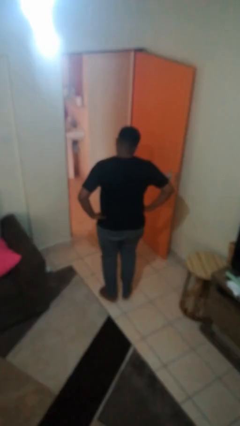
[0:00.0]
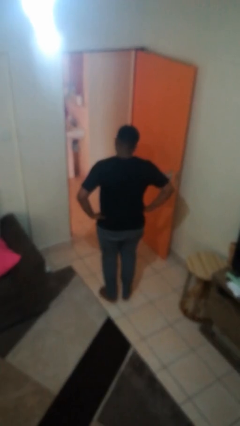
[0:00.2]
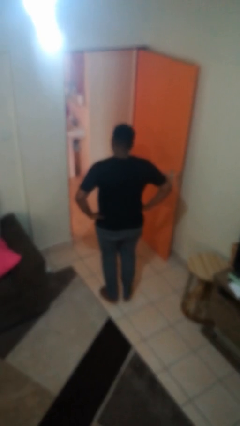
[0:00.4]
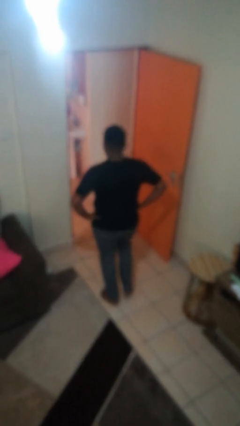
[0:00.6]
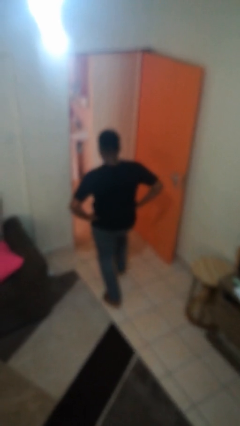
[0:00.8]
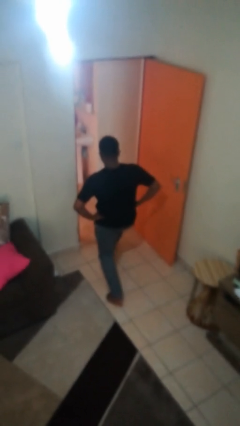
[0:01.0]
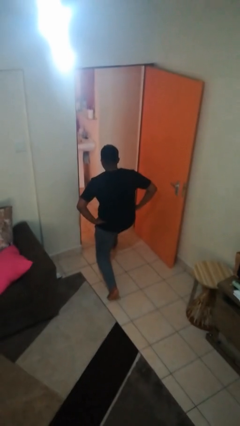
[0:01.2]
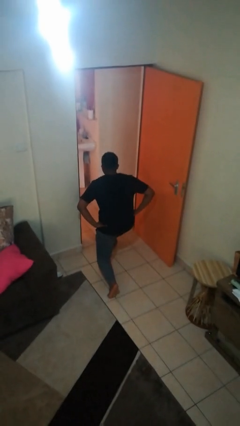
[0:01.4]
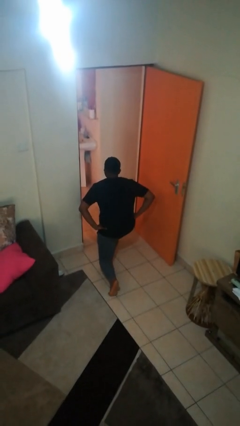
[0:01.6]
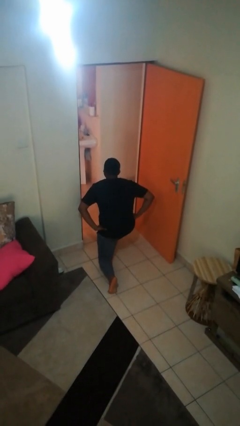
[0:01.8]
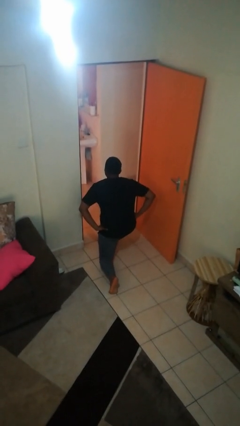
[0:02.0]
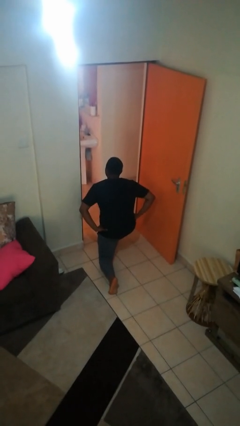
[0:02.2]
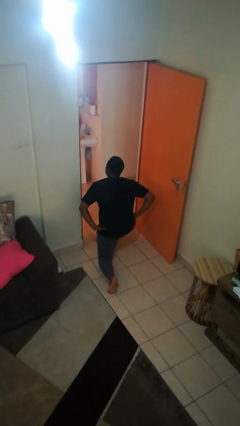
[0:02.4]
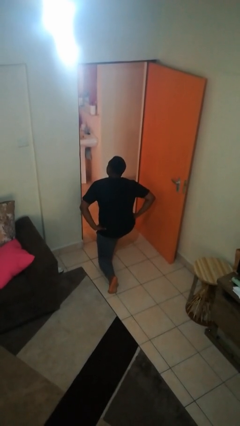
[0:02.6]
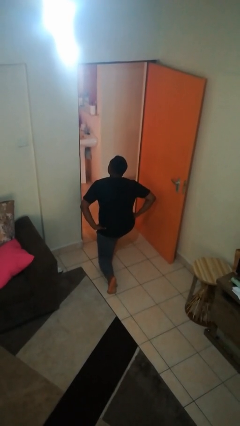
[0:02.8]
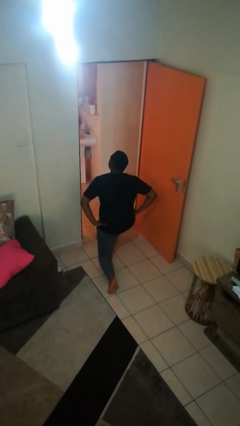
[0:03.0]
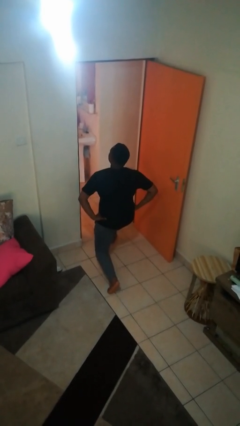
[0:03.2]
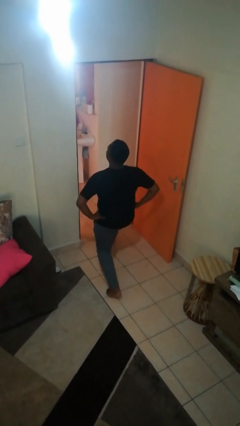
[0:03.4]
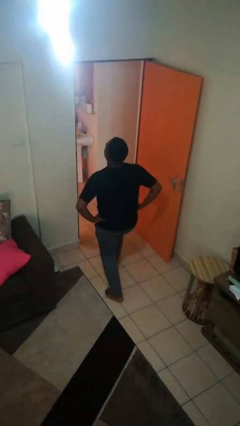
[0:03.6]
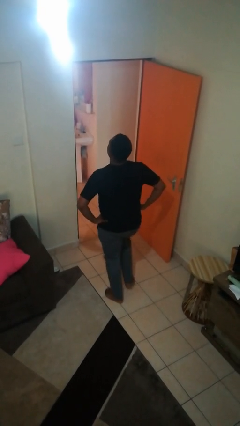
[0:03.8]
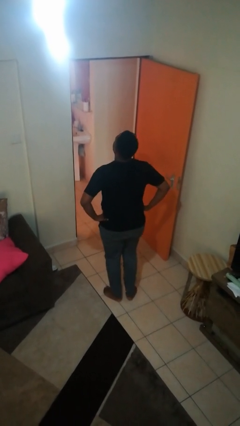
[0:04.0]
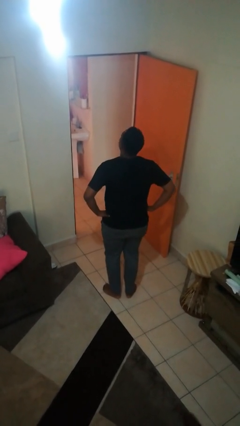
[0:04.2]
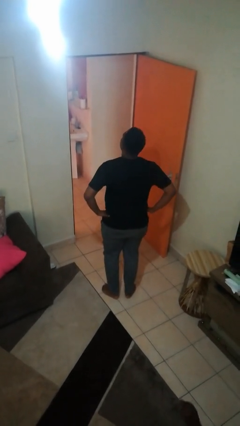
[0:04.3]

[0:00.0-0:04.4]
person exercises with lunges

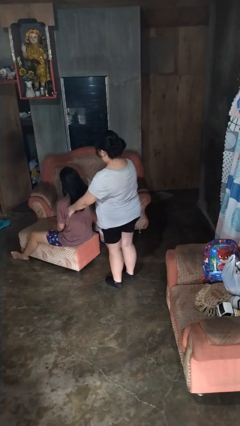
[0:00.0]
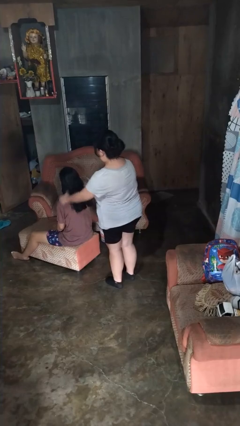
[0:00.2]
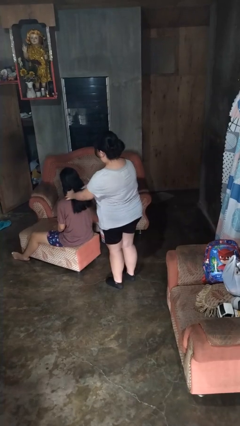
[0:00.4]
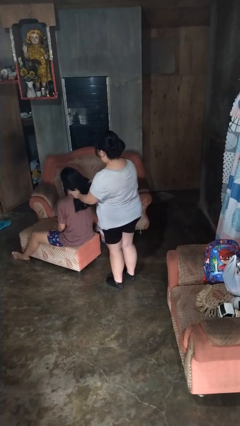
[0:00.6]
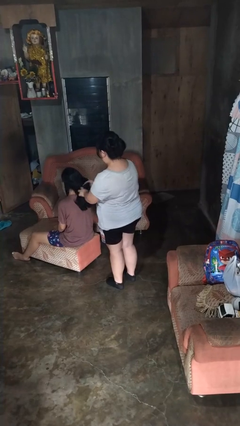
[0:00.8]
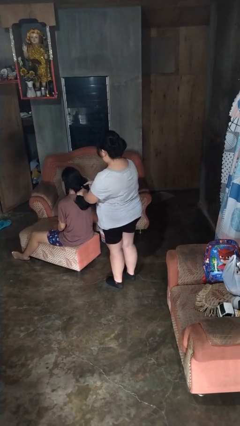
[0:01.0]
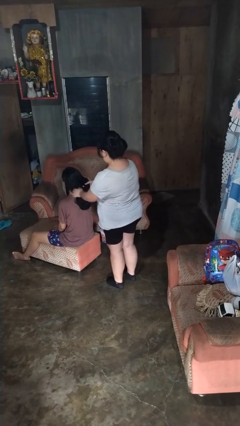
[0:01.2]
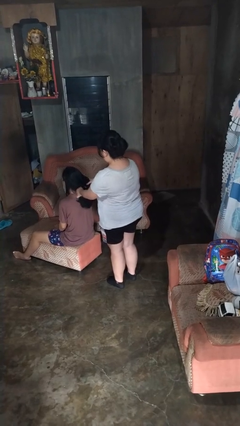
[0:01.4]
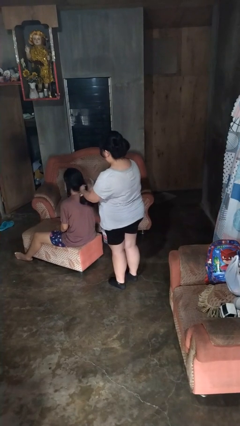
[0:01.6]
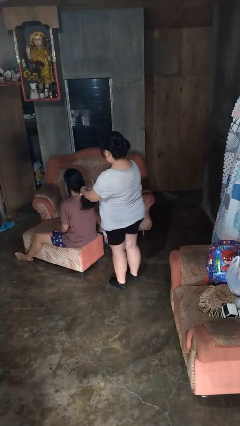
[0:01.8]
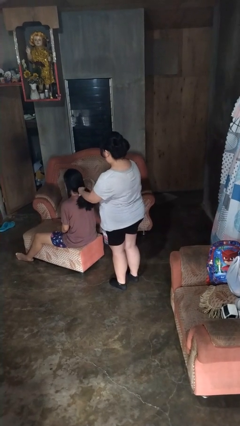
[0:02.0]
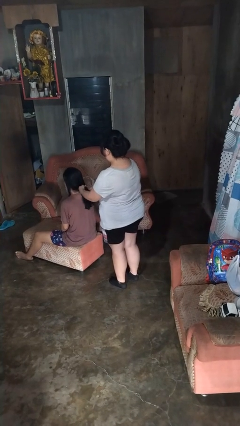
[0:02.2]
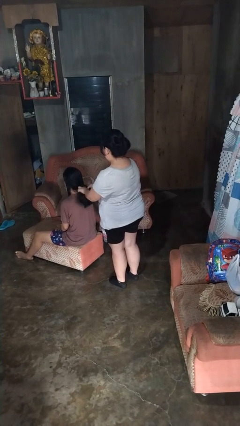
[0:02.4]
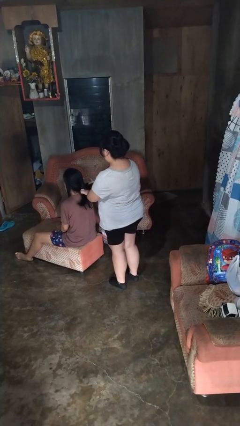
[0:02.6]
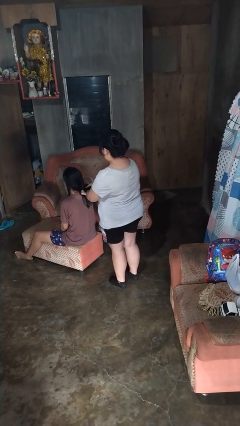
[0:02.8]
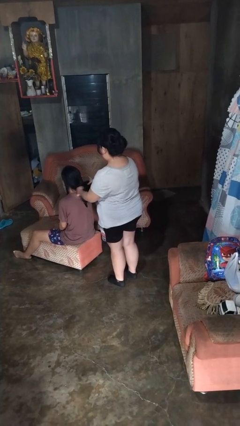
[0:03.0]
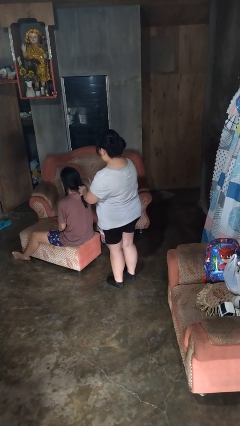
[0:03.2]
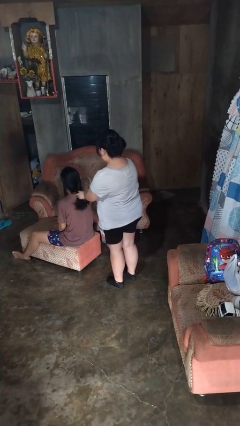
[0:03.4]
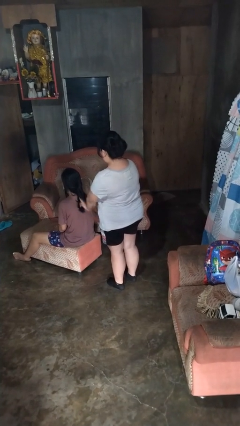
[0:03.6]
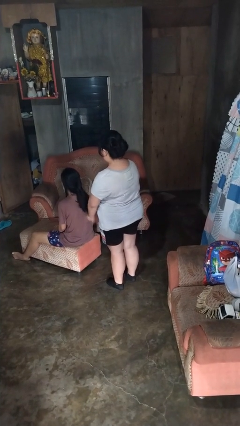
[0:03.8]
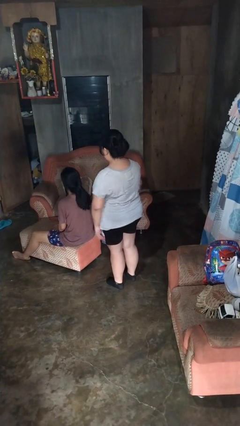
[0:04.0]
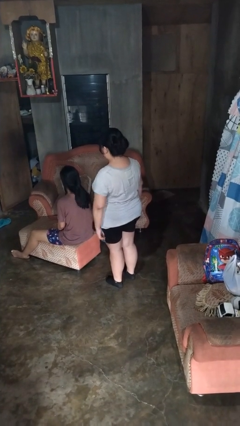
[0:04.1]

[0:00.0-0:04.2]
person braids hair of person

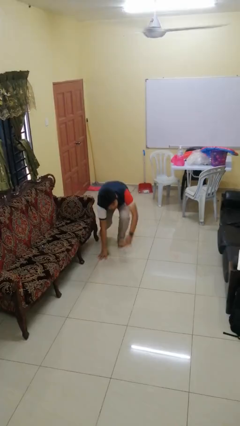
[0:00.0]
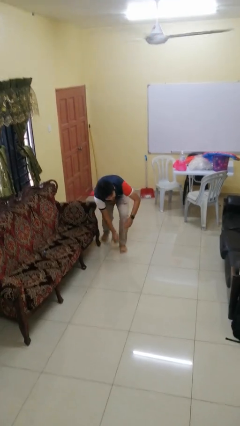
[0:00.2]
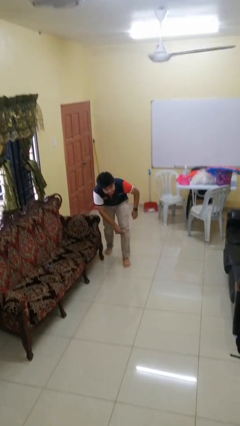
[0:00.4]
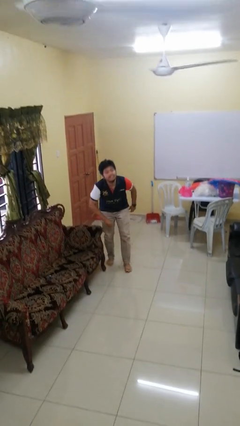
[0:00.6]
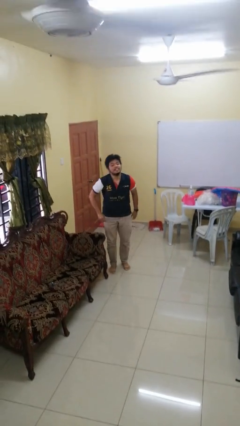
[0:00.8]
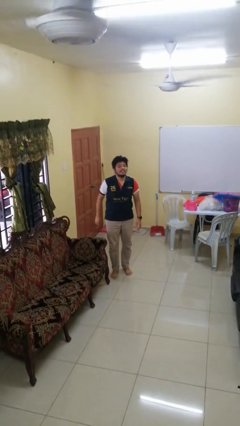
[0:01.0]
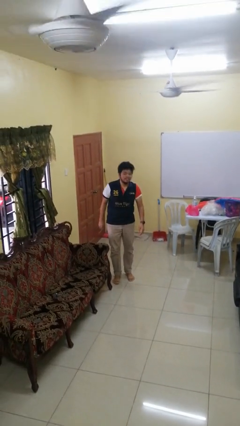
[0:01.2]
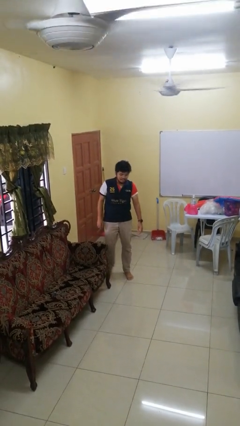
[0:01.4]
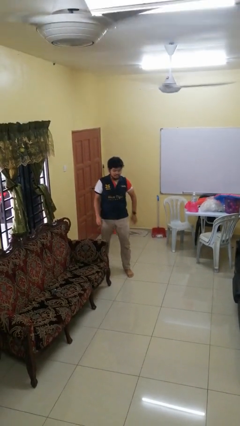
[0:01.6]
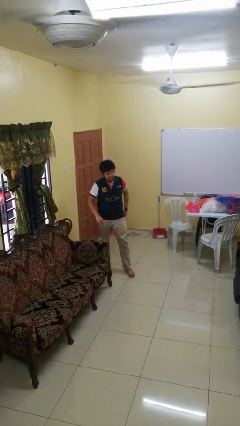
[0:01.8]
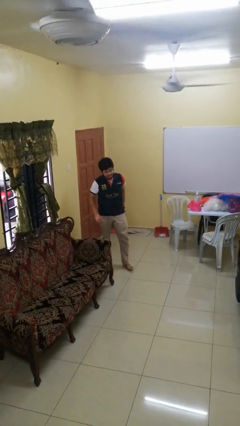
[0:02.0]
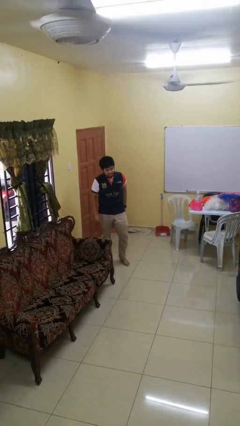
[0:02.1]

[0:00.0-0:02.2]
person stands up from floor

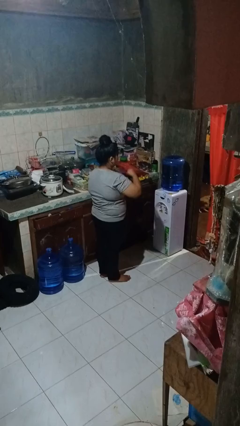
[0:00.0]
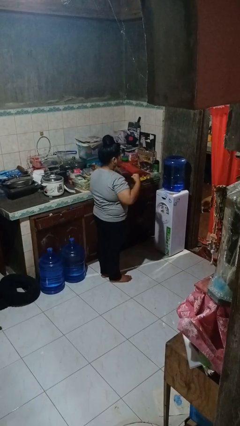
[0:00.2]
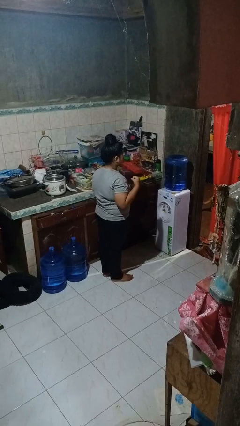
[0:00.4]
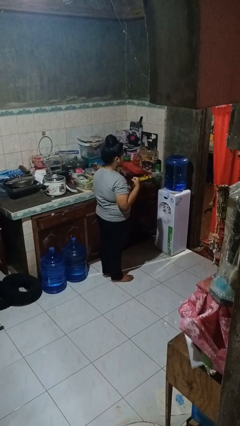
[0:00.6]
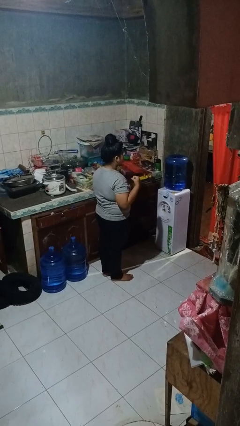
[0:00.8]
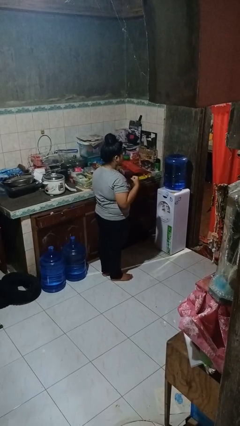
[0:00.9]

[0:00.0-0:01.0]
person punches

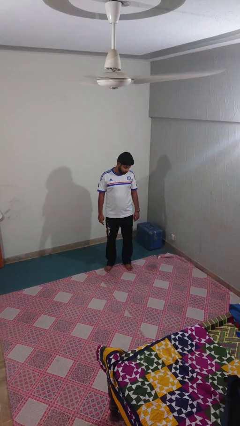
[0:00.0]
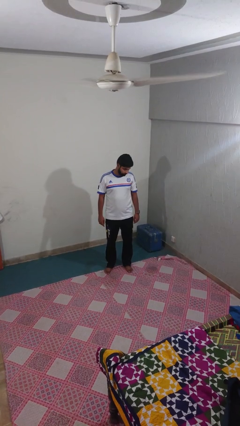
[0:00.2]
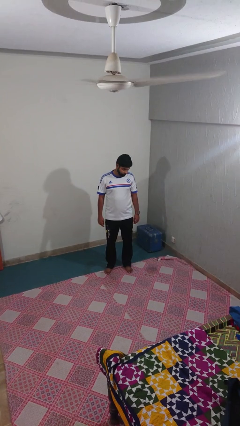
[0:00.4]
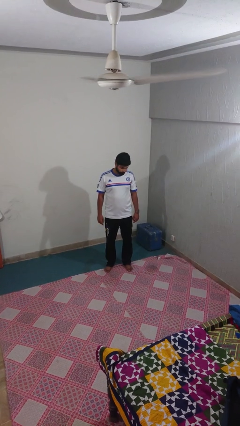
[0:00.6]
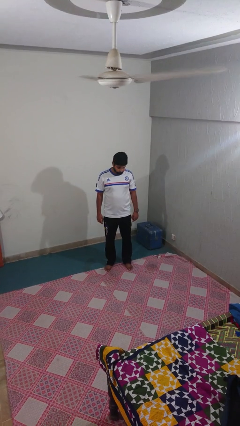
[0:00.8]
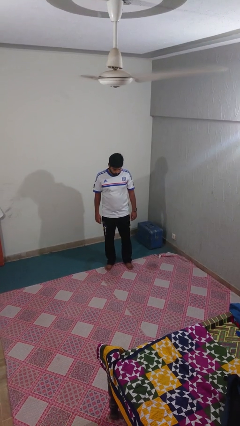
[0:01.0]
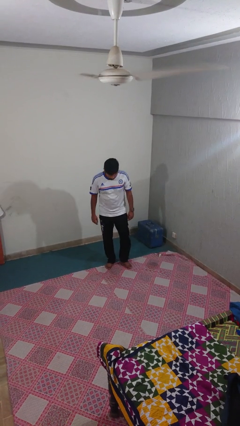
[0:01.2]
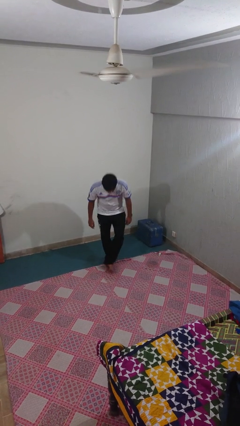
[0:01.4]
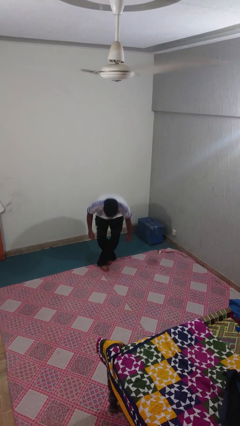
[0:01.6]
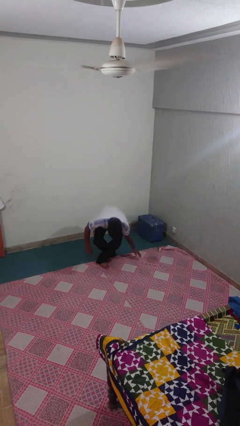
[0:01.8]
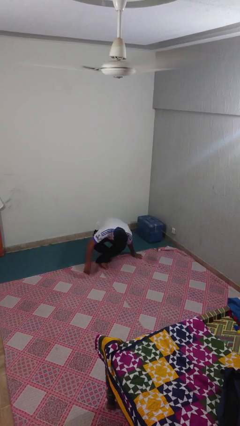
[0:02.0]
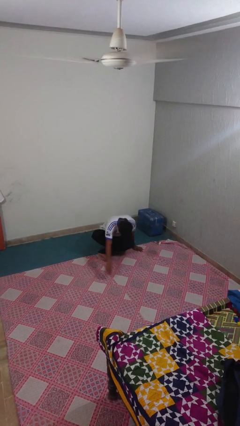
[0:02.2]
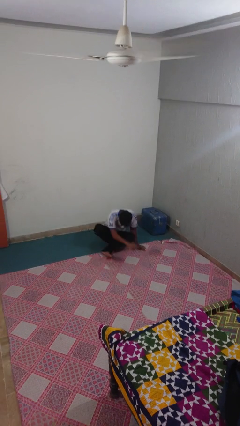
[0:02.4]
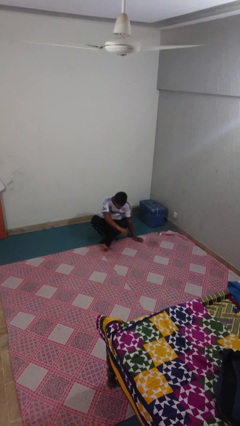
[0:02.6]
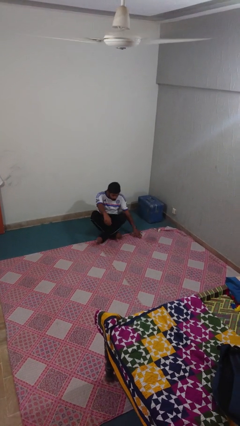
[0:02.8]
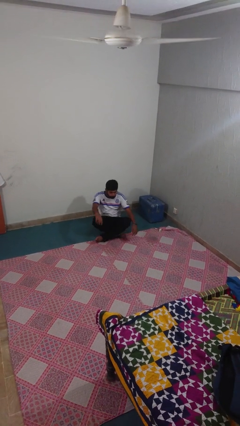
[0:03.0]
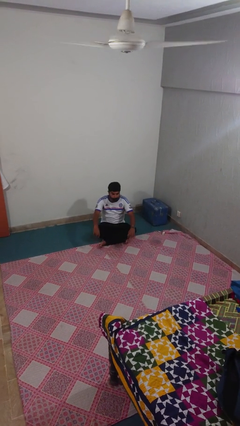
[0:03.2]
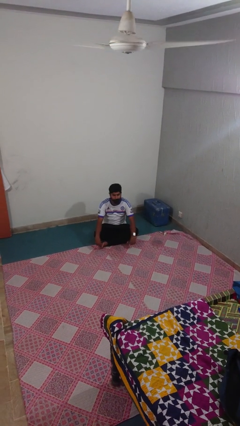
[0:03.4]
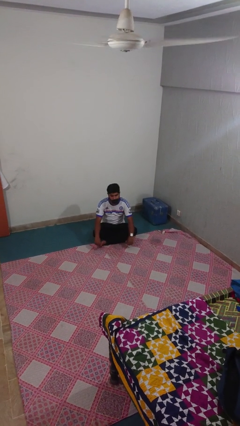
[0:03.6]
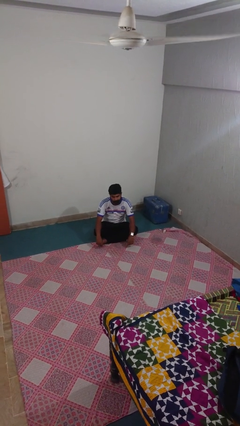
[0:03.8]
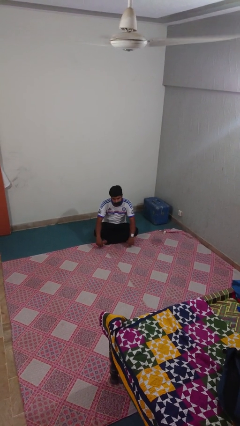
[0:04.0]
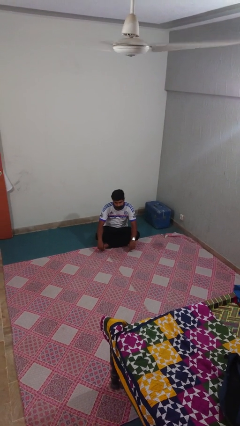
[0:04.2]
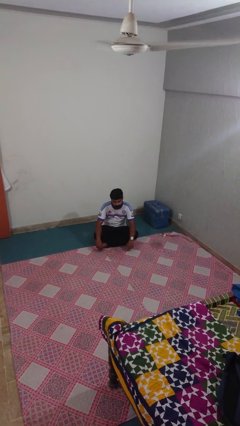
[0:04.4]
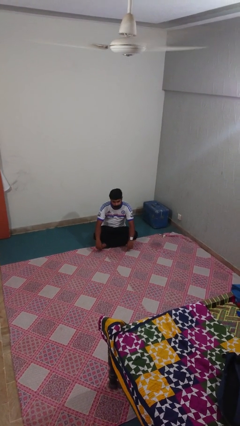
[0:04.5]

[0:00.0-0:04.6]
person sits crisscross

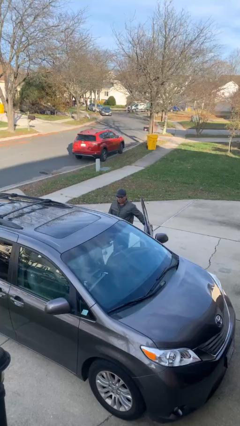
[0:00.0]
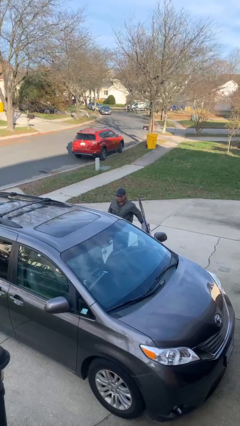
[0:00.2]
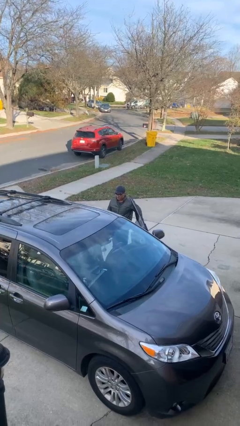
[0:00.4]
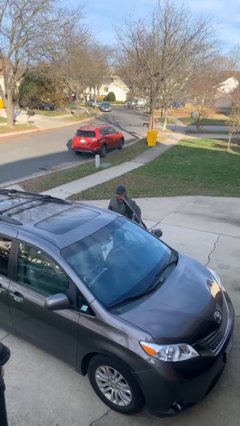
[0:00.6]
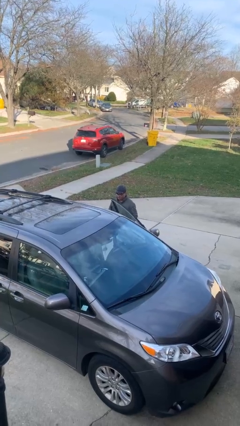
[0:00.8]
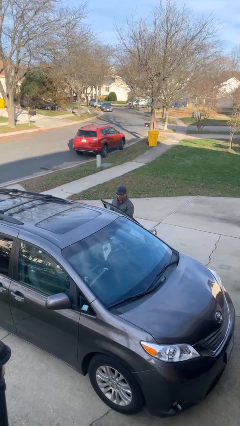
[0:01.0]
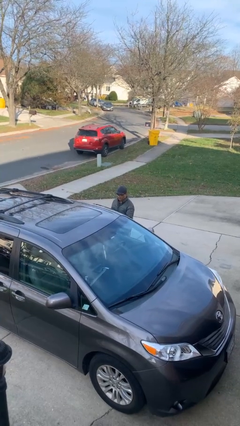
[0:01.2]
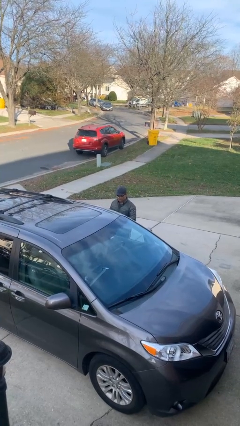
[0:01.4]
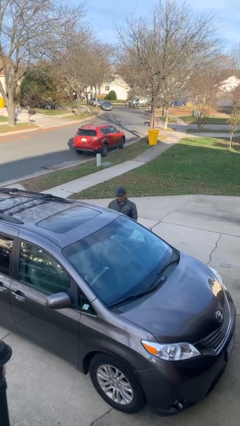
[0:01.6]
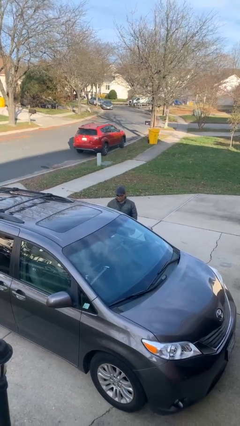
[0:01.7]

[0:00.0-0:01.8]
person closes car door
